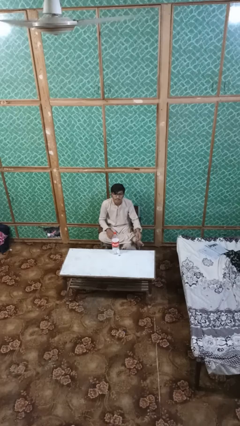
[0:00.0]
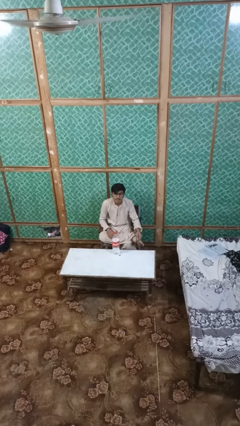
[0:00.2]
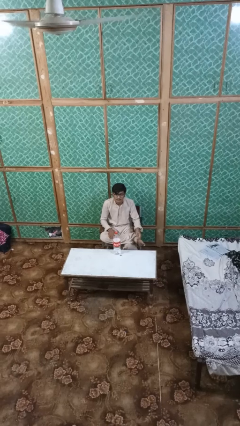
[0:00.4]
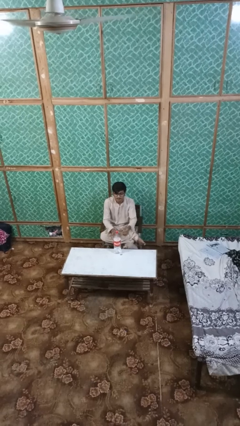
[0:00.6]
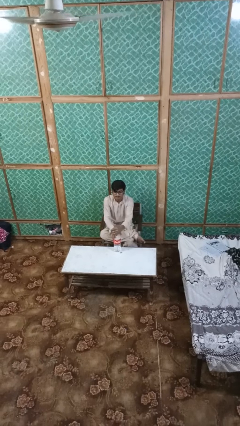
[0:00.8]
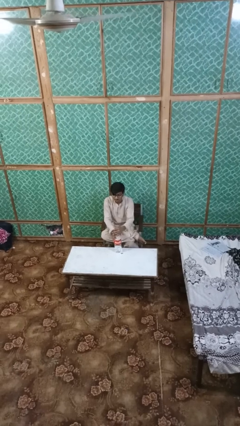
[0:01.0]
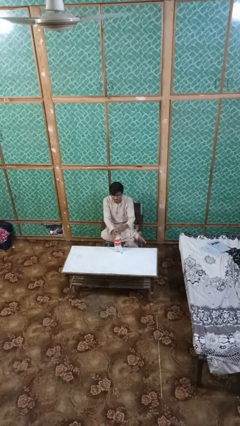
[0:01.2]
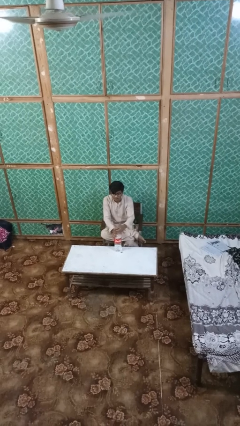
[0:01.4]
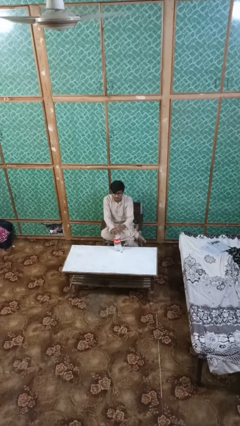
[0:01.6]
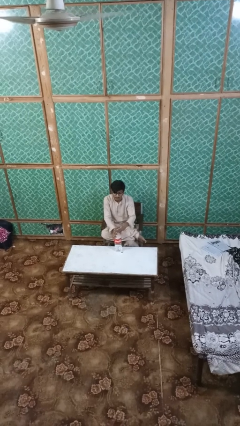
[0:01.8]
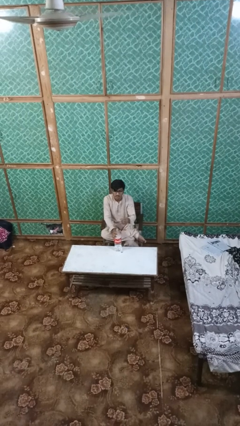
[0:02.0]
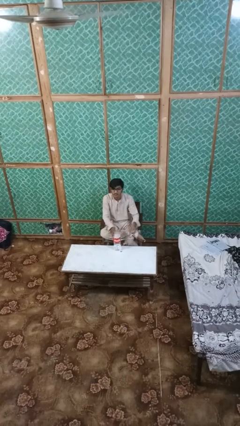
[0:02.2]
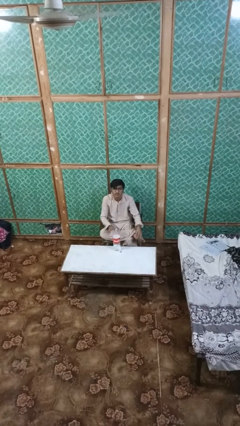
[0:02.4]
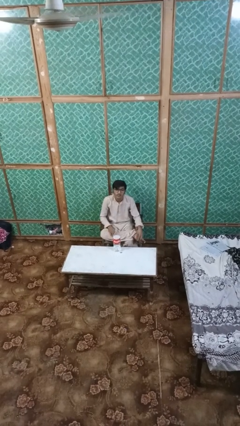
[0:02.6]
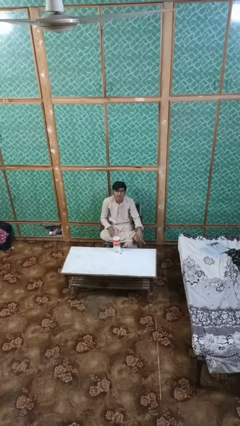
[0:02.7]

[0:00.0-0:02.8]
person unscrews lid from bottle

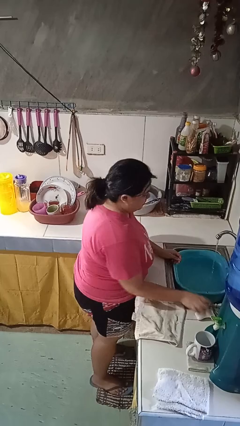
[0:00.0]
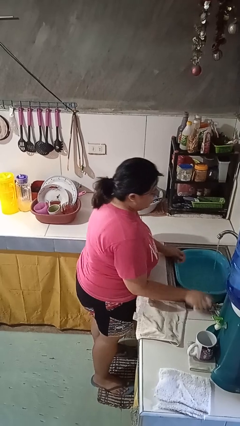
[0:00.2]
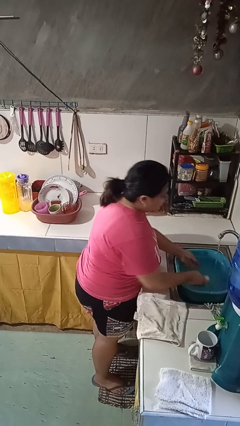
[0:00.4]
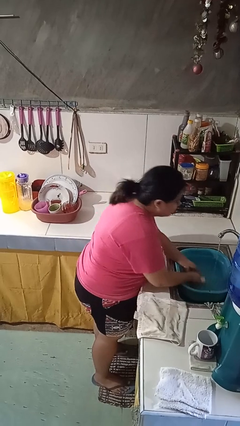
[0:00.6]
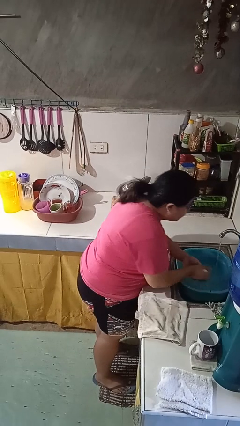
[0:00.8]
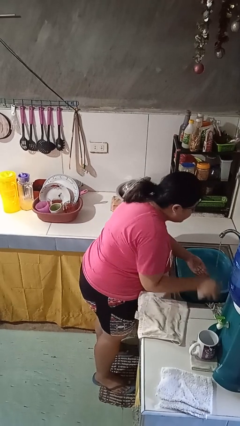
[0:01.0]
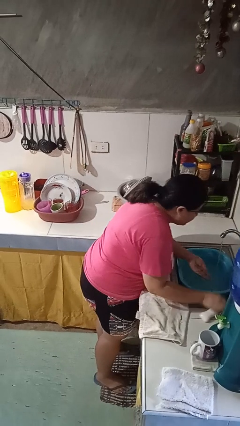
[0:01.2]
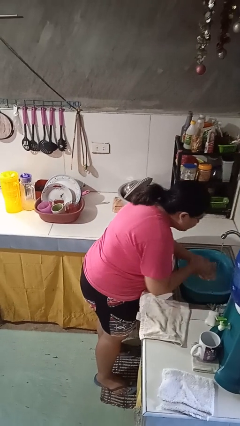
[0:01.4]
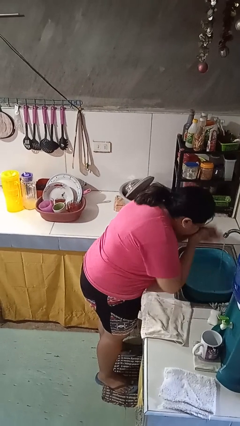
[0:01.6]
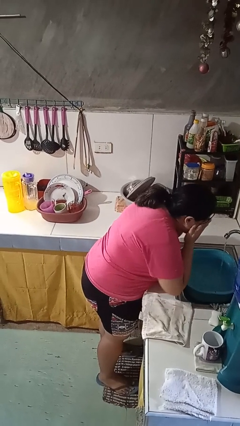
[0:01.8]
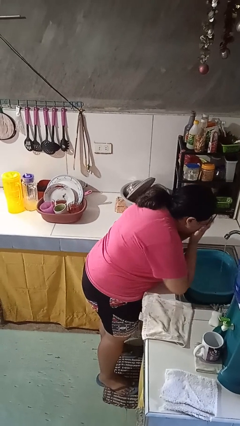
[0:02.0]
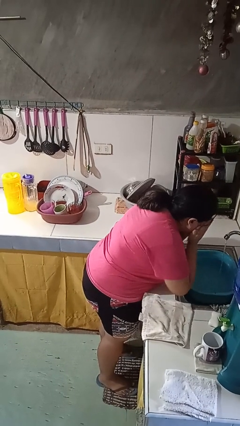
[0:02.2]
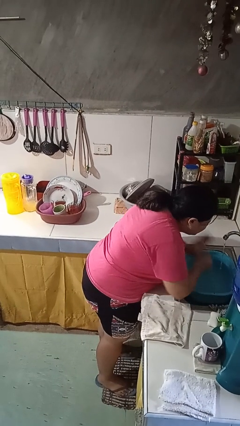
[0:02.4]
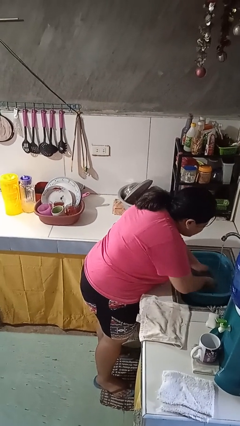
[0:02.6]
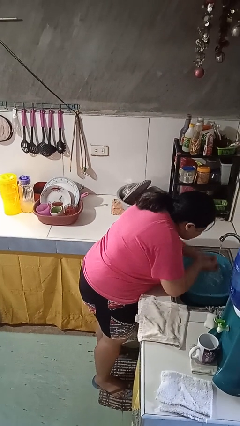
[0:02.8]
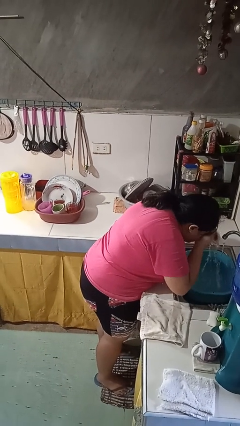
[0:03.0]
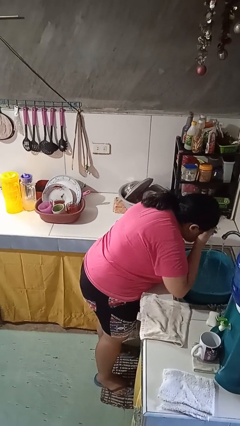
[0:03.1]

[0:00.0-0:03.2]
person washes face

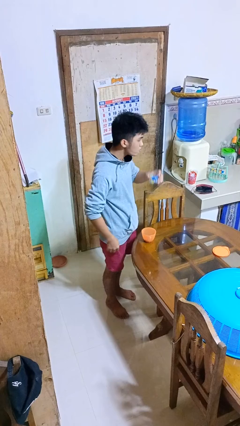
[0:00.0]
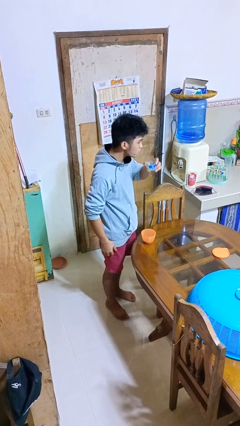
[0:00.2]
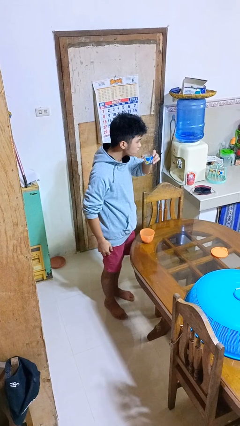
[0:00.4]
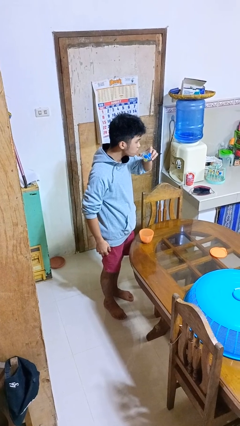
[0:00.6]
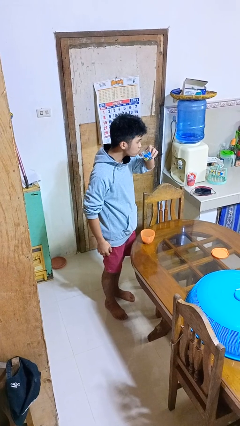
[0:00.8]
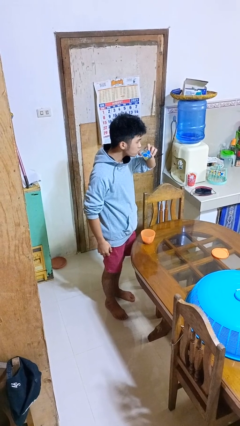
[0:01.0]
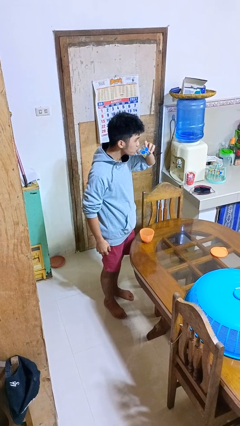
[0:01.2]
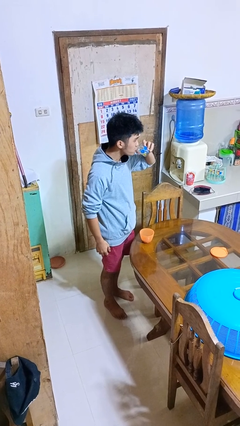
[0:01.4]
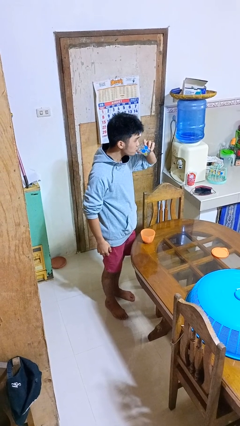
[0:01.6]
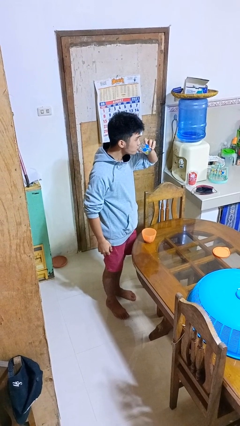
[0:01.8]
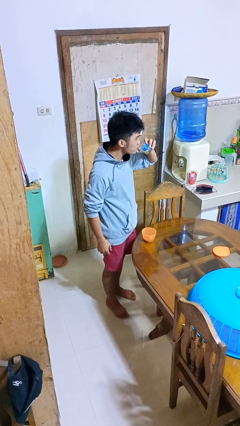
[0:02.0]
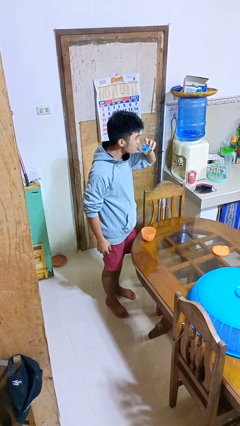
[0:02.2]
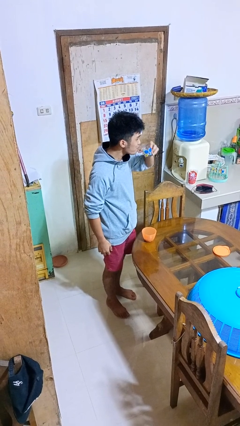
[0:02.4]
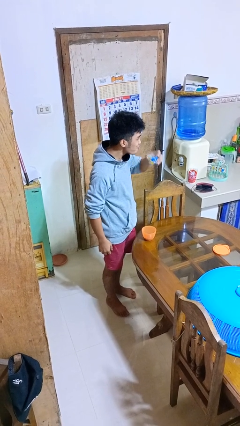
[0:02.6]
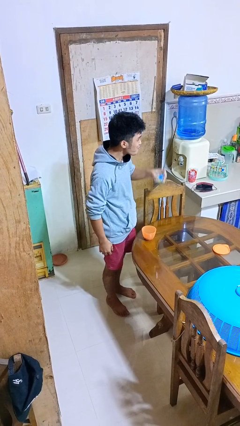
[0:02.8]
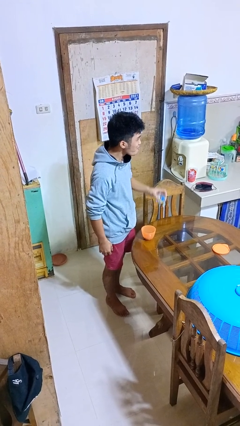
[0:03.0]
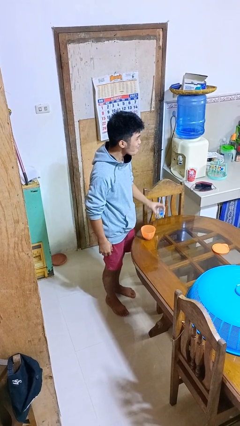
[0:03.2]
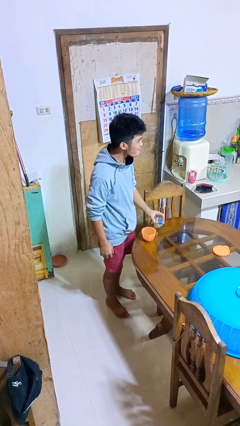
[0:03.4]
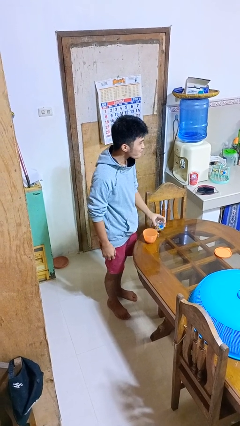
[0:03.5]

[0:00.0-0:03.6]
person drinks from cup

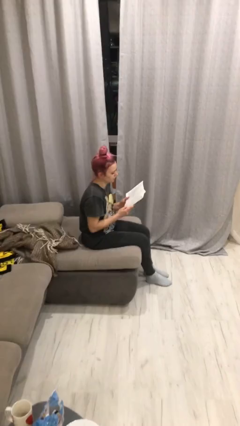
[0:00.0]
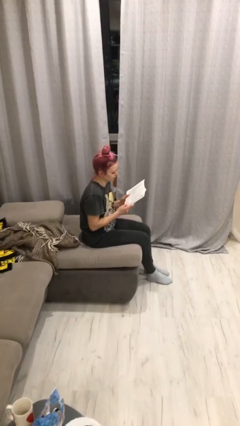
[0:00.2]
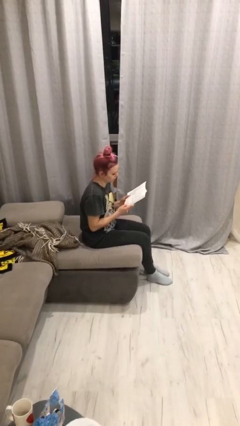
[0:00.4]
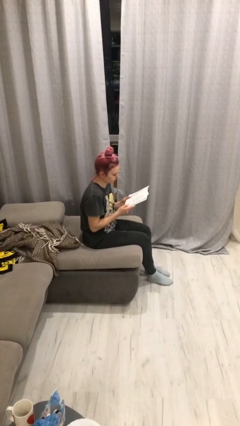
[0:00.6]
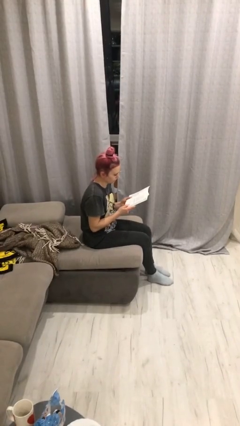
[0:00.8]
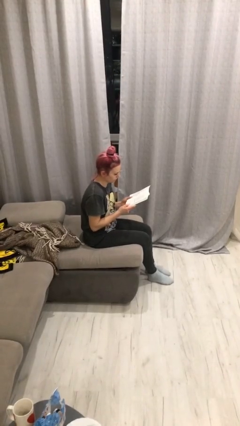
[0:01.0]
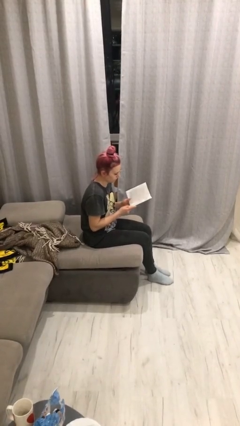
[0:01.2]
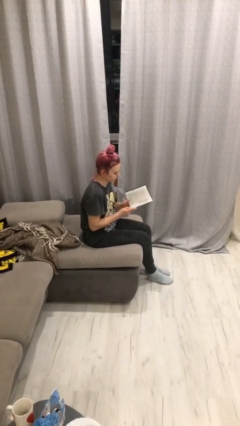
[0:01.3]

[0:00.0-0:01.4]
person reads document

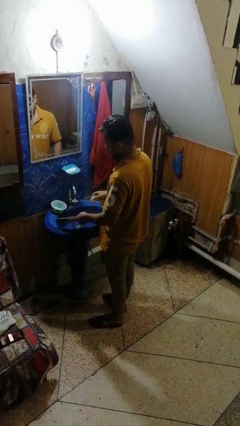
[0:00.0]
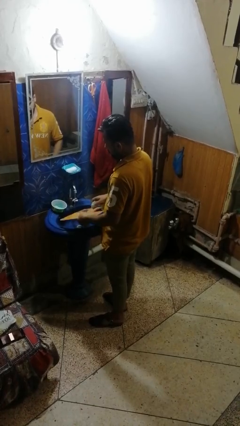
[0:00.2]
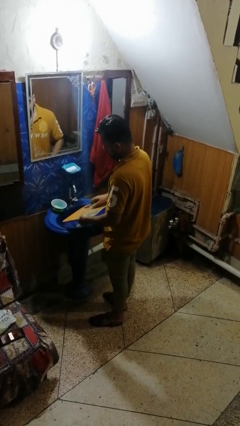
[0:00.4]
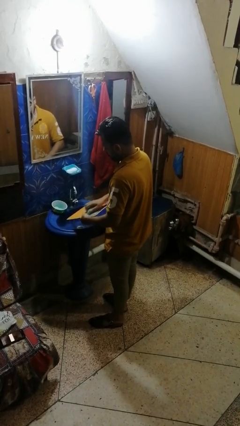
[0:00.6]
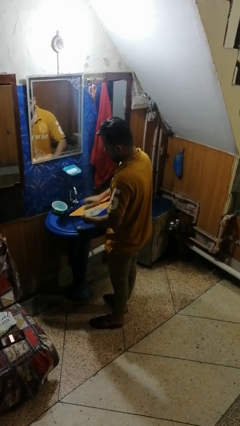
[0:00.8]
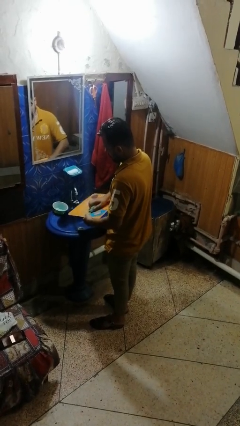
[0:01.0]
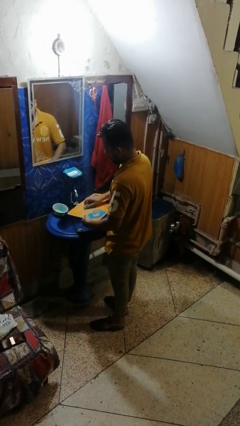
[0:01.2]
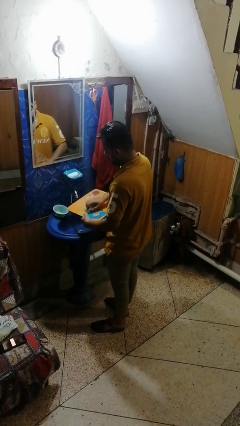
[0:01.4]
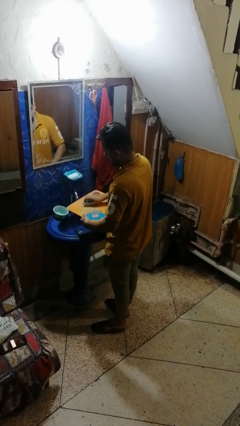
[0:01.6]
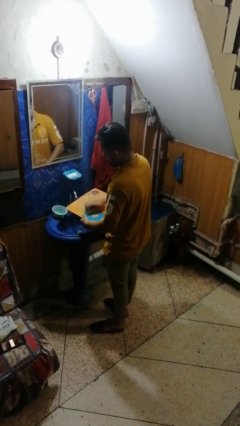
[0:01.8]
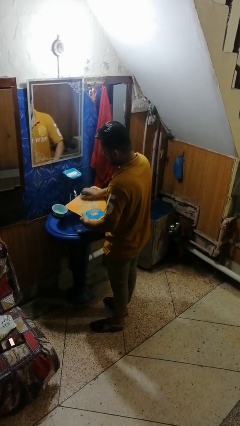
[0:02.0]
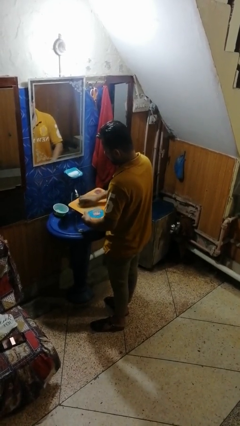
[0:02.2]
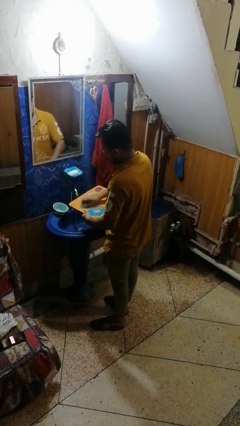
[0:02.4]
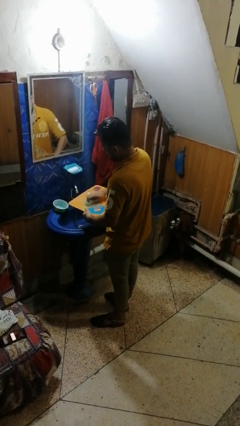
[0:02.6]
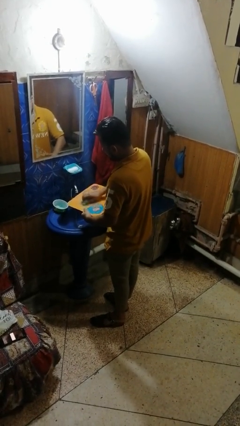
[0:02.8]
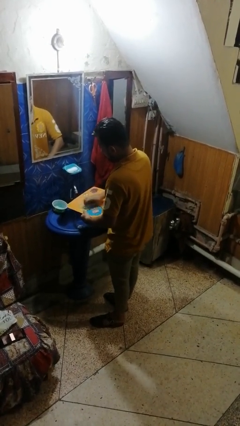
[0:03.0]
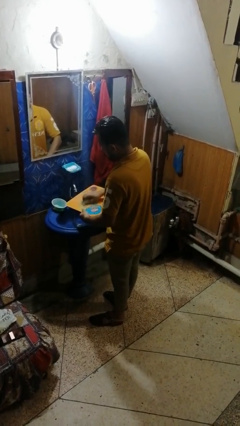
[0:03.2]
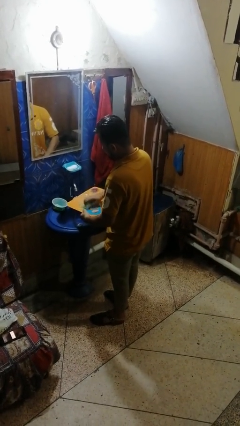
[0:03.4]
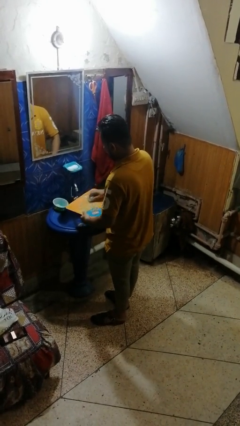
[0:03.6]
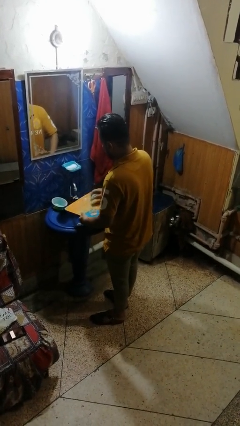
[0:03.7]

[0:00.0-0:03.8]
person washes dish

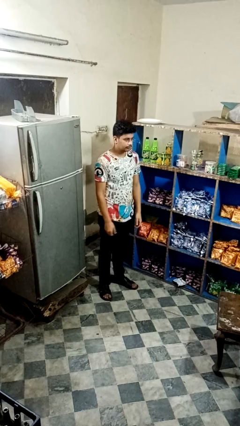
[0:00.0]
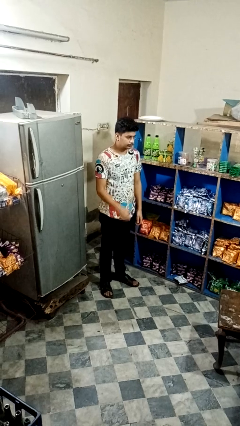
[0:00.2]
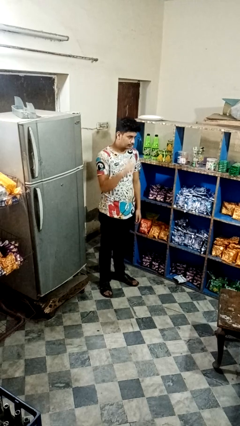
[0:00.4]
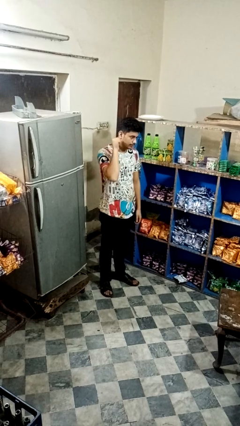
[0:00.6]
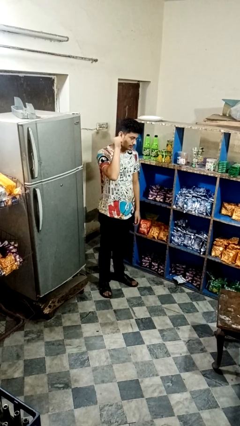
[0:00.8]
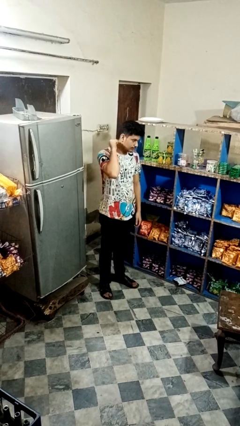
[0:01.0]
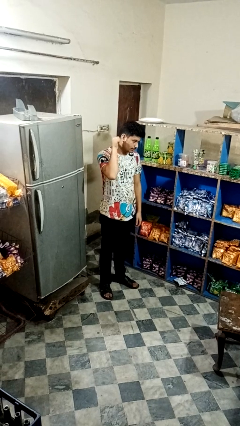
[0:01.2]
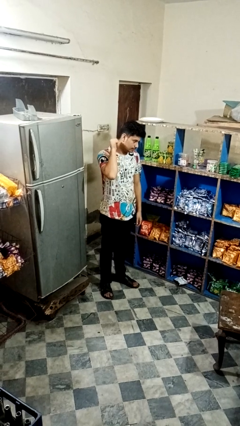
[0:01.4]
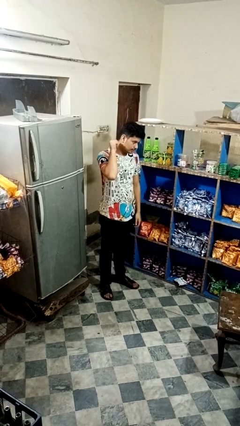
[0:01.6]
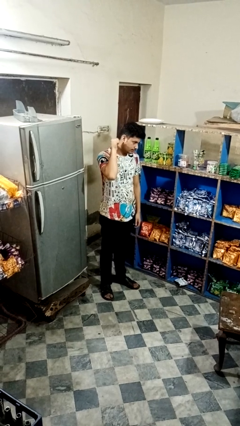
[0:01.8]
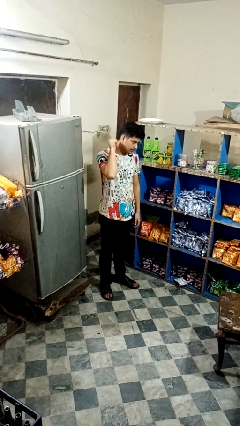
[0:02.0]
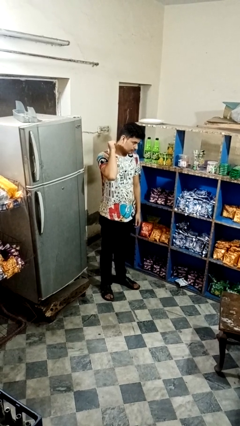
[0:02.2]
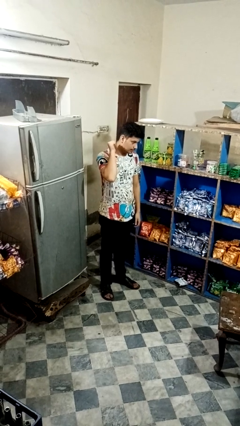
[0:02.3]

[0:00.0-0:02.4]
person gestures behind me
